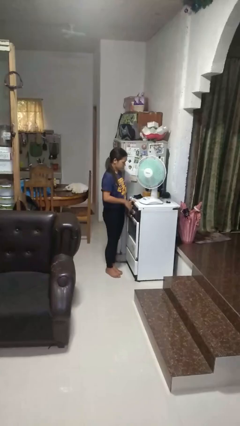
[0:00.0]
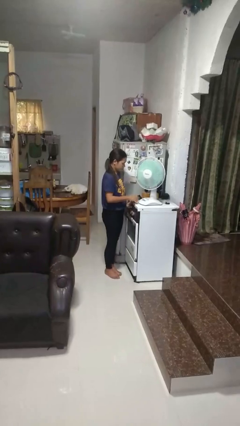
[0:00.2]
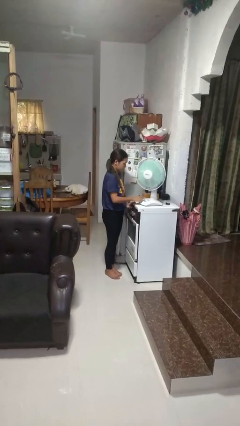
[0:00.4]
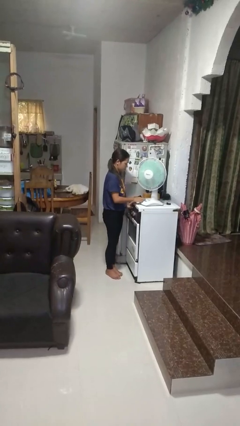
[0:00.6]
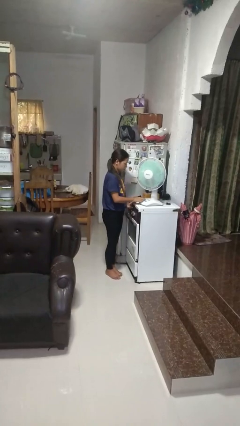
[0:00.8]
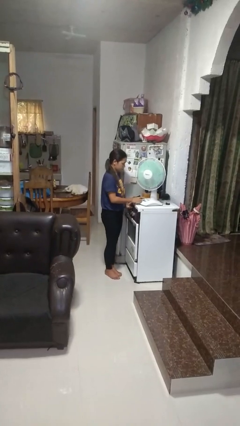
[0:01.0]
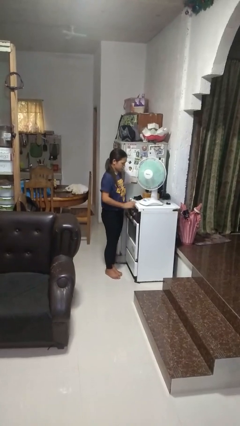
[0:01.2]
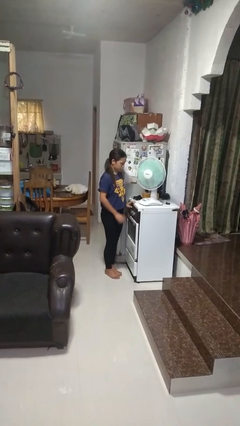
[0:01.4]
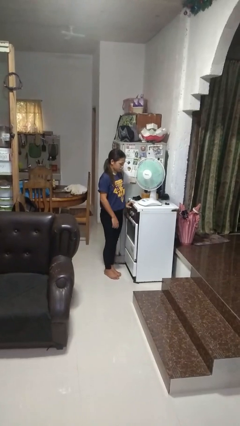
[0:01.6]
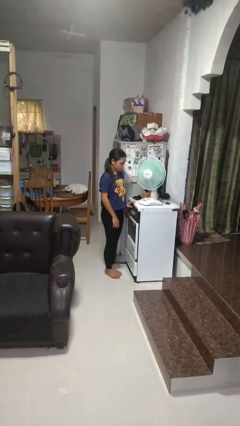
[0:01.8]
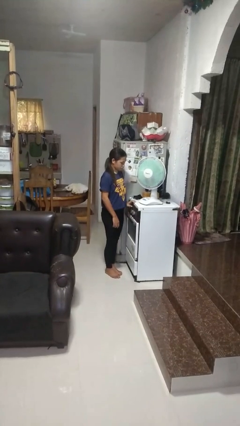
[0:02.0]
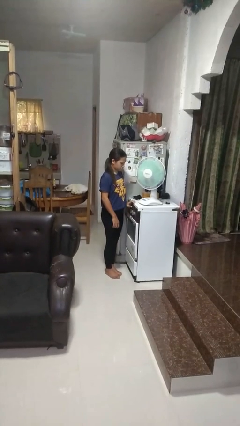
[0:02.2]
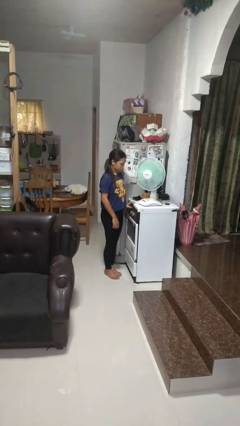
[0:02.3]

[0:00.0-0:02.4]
person turns on fan

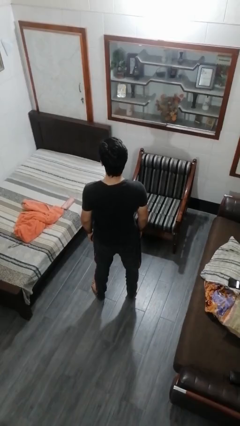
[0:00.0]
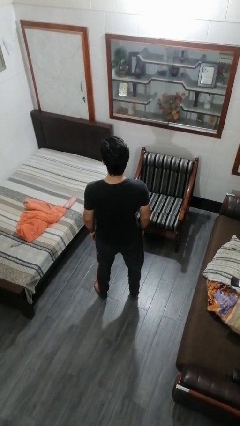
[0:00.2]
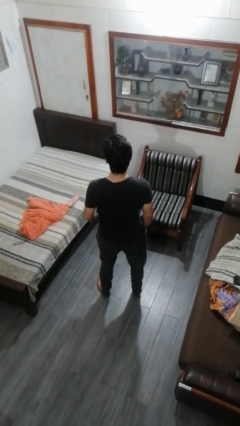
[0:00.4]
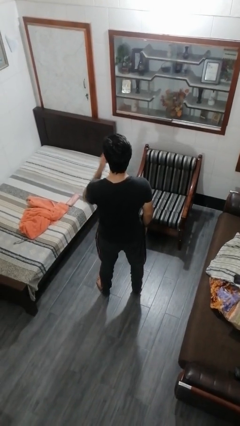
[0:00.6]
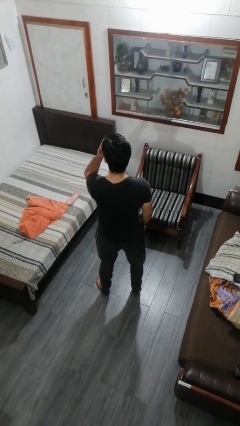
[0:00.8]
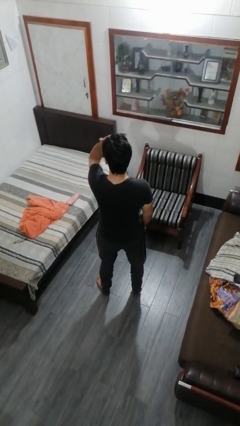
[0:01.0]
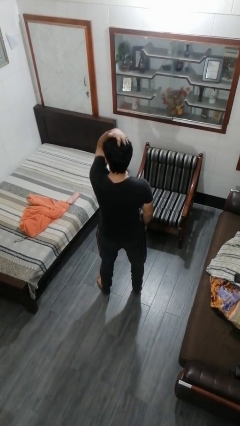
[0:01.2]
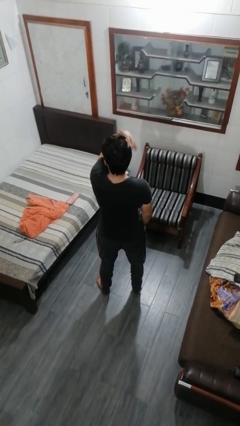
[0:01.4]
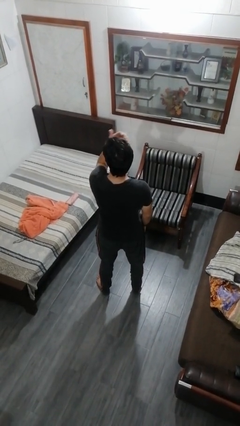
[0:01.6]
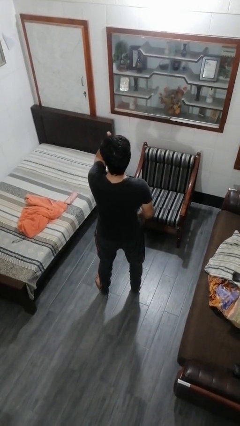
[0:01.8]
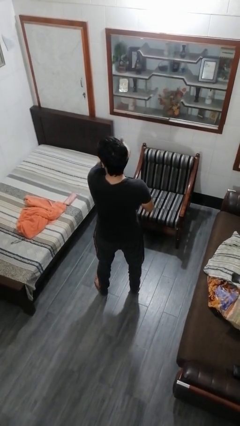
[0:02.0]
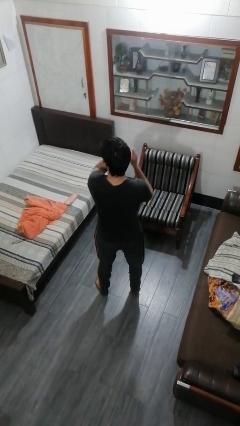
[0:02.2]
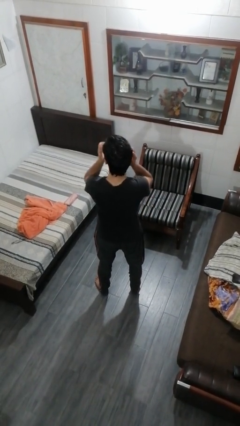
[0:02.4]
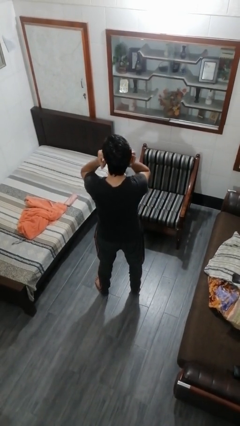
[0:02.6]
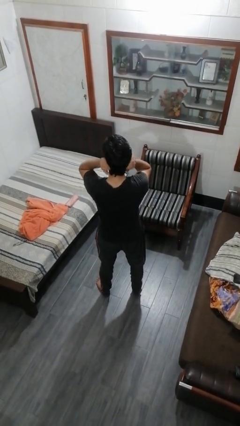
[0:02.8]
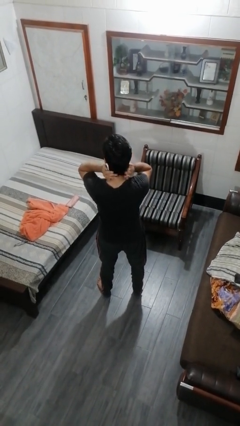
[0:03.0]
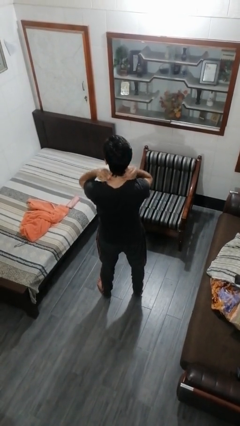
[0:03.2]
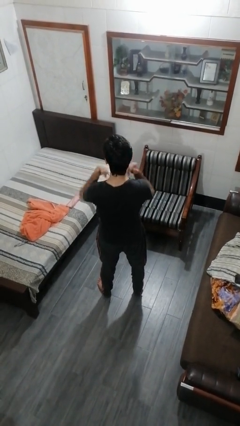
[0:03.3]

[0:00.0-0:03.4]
person strokes hair

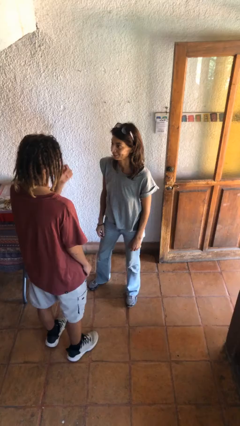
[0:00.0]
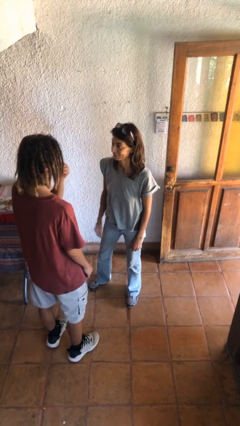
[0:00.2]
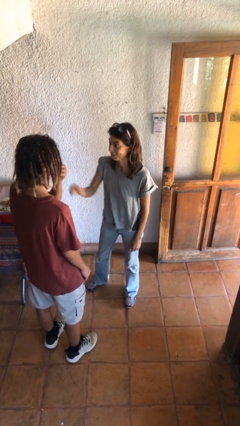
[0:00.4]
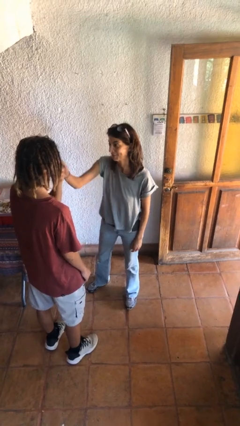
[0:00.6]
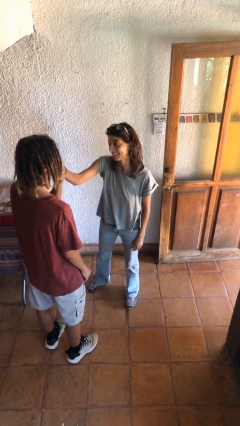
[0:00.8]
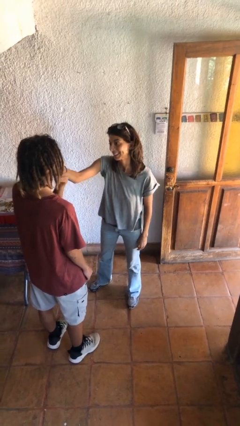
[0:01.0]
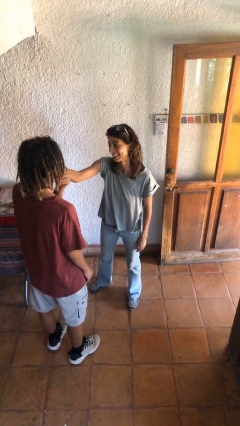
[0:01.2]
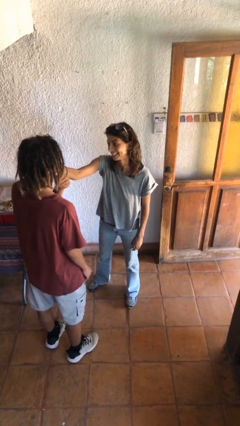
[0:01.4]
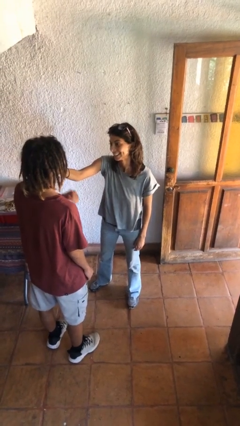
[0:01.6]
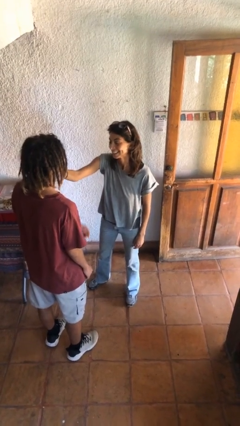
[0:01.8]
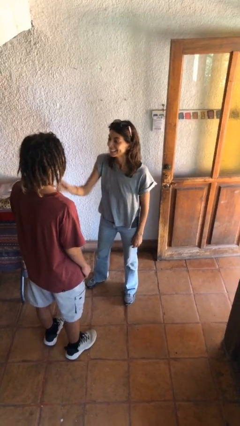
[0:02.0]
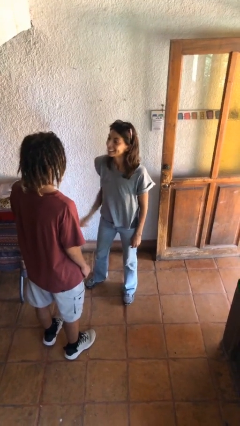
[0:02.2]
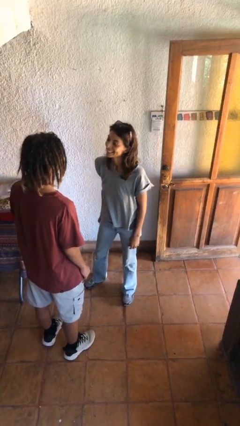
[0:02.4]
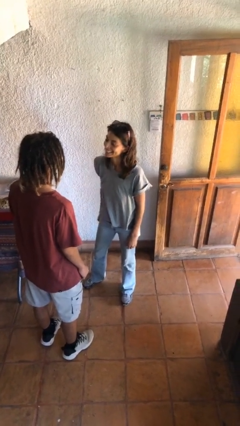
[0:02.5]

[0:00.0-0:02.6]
person touches face of person

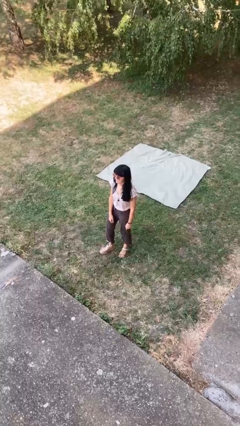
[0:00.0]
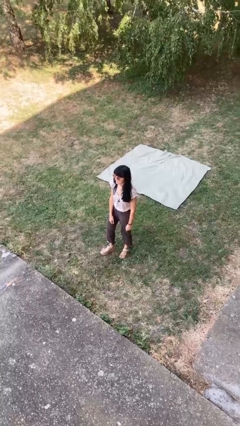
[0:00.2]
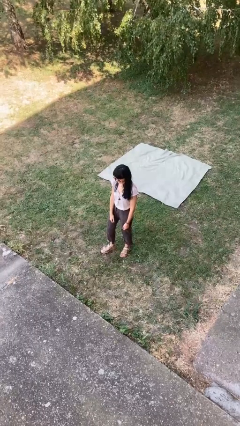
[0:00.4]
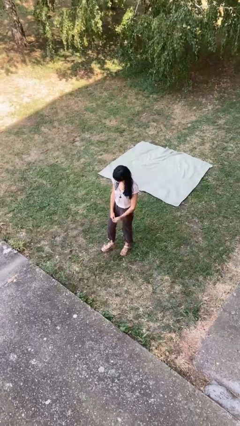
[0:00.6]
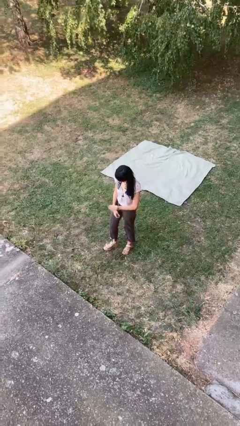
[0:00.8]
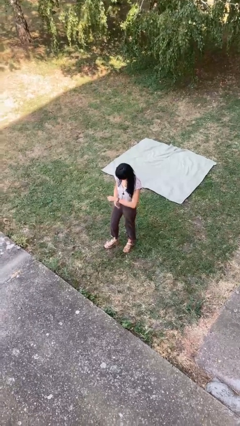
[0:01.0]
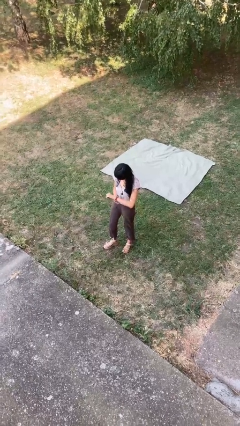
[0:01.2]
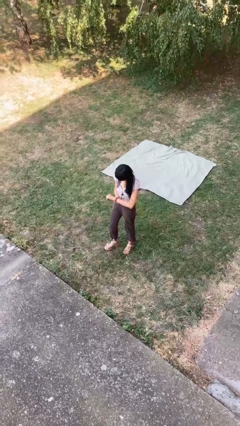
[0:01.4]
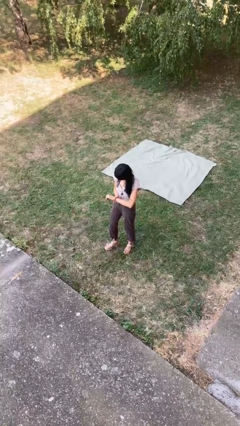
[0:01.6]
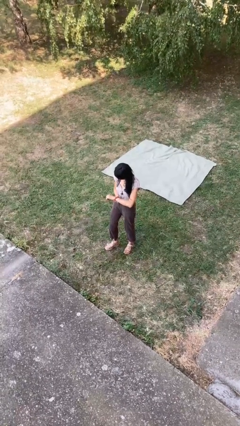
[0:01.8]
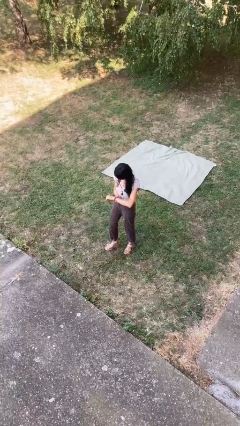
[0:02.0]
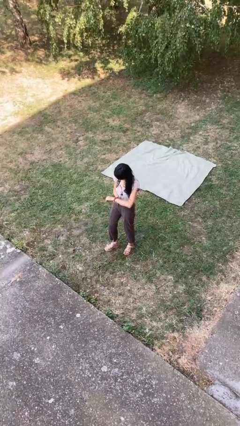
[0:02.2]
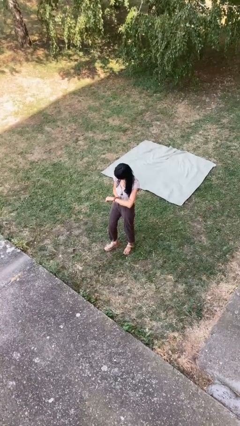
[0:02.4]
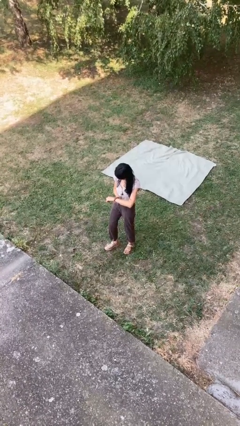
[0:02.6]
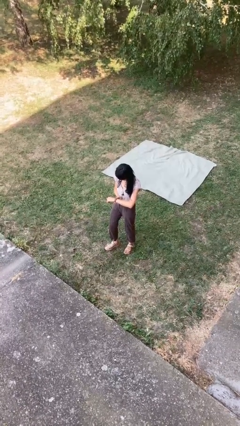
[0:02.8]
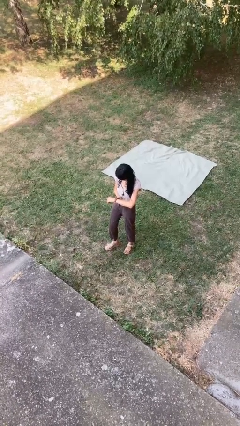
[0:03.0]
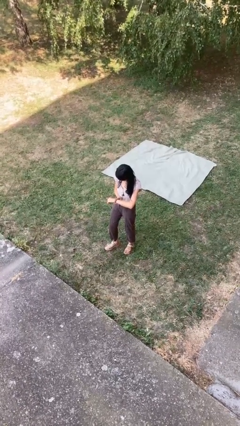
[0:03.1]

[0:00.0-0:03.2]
person looks at wristwatch

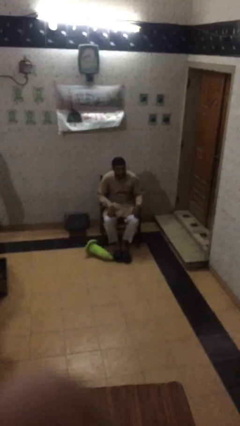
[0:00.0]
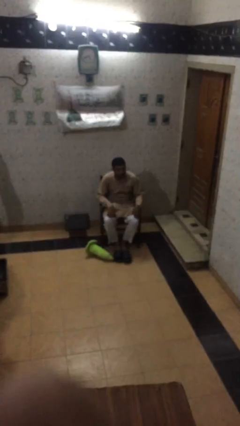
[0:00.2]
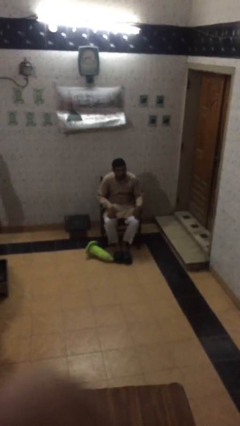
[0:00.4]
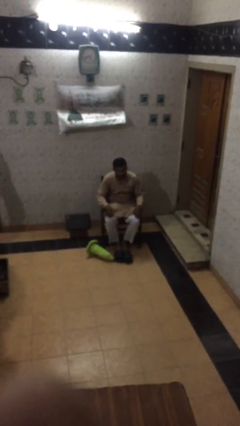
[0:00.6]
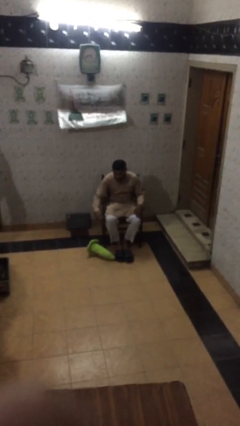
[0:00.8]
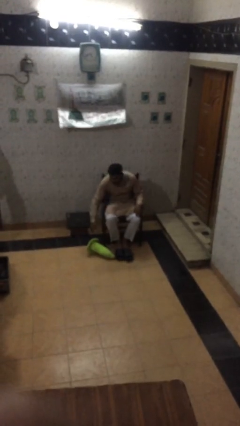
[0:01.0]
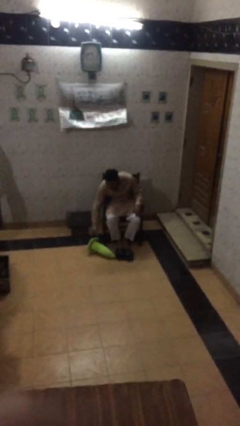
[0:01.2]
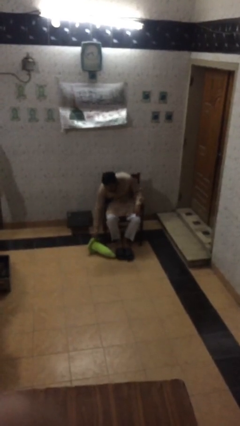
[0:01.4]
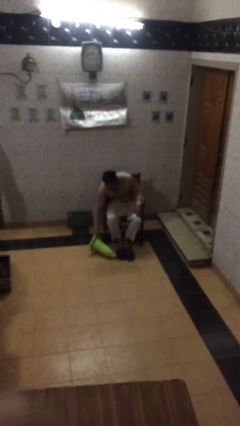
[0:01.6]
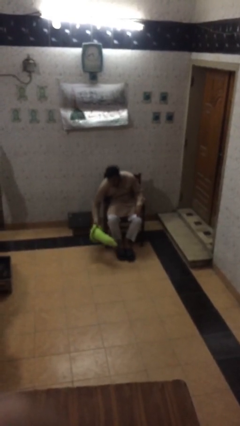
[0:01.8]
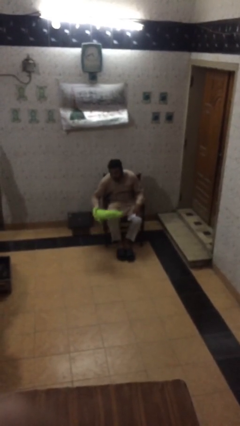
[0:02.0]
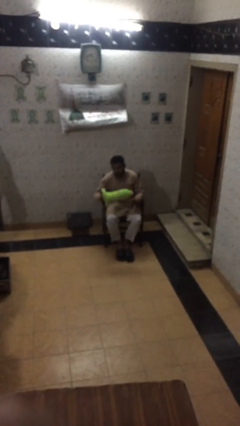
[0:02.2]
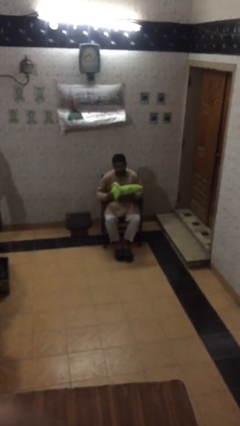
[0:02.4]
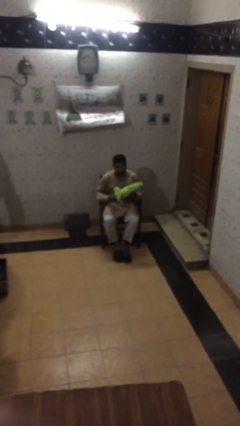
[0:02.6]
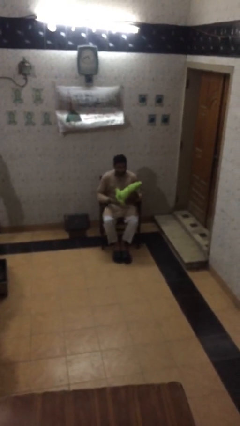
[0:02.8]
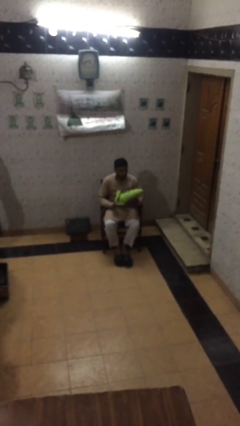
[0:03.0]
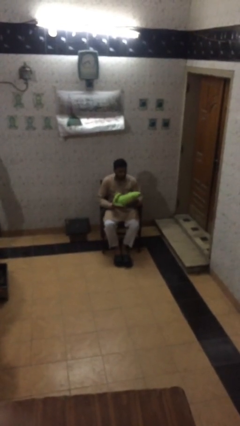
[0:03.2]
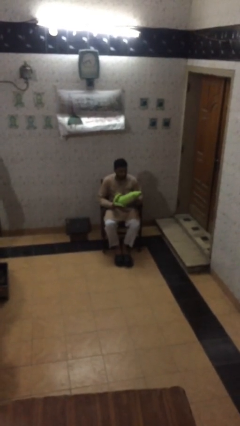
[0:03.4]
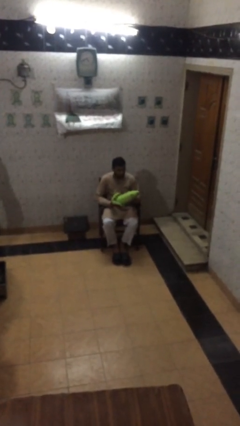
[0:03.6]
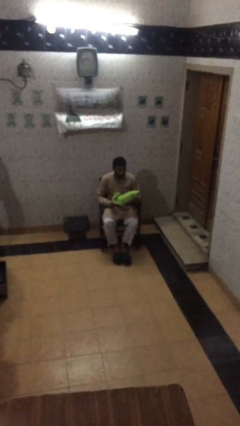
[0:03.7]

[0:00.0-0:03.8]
person picks up object from floor

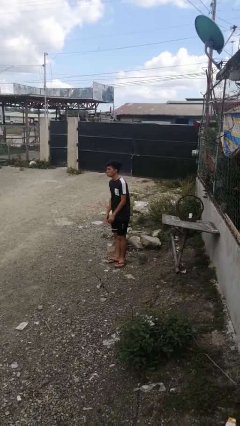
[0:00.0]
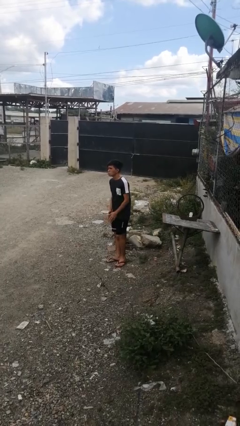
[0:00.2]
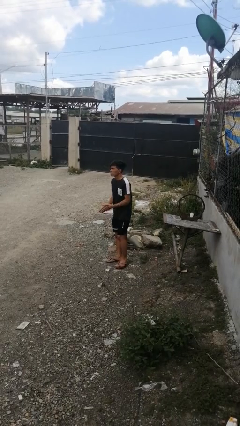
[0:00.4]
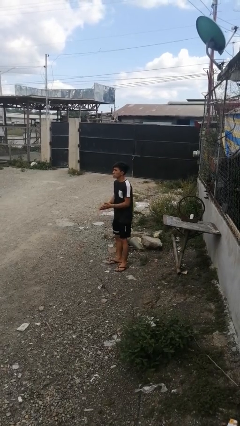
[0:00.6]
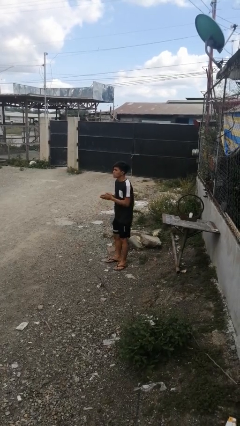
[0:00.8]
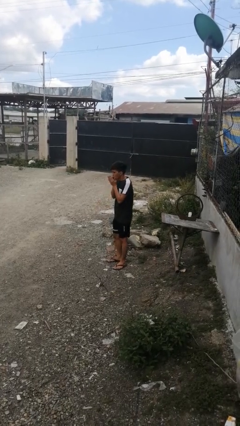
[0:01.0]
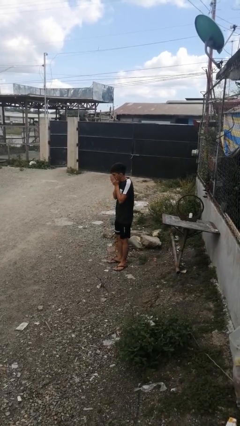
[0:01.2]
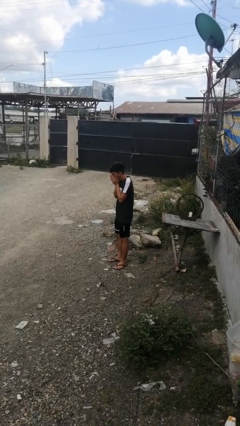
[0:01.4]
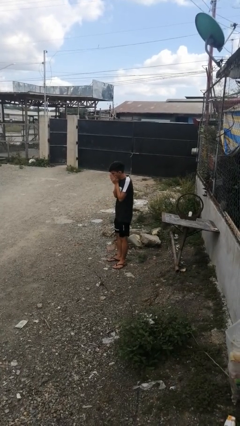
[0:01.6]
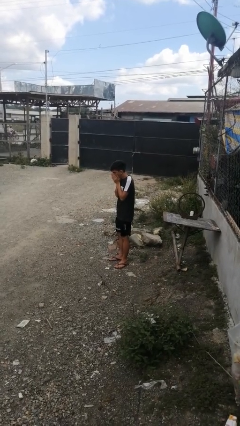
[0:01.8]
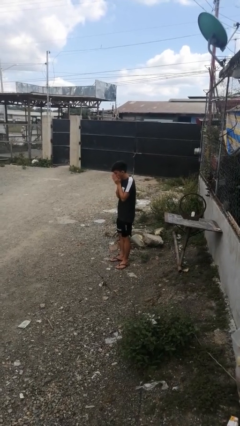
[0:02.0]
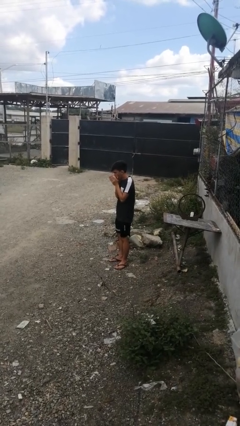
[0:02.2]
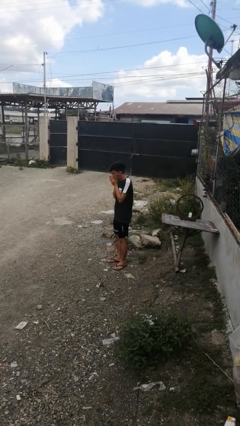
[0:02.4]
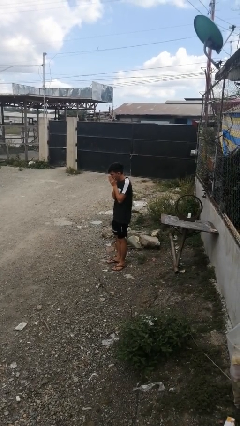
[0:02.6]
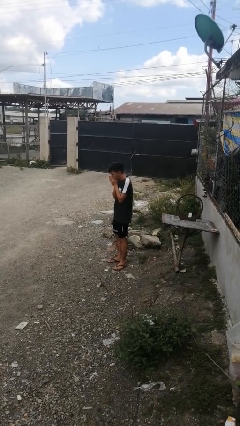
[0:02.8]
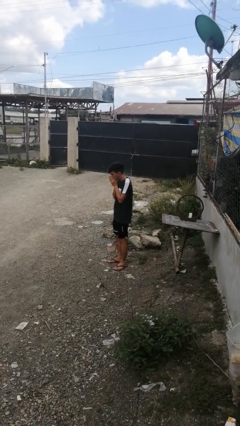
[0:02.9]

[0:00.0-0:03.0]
person blows into hands
